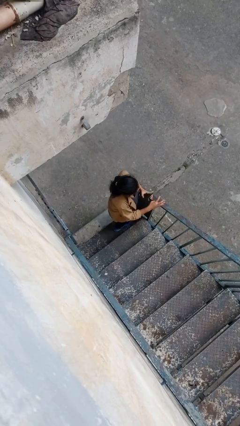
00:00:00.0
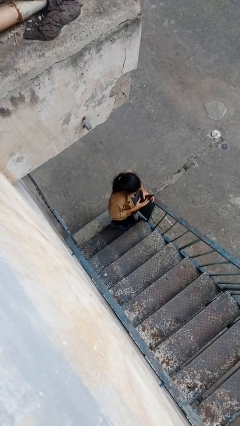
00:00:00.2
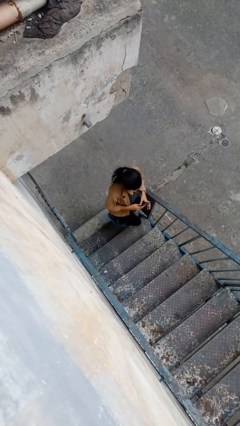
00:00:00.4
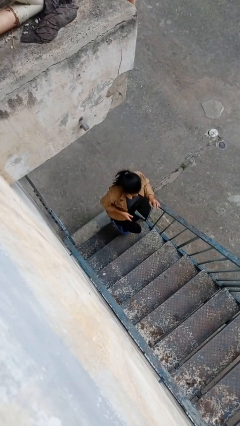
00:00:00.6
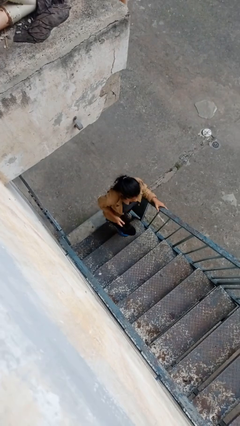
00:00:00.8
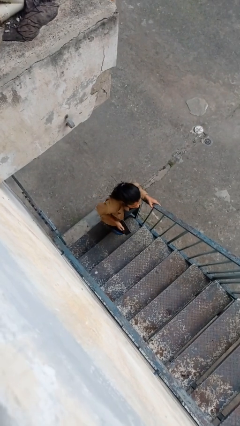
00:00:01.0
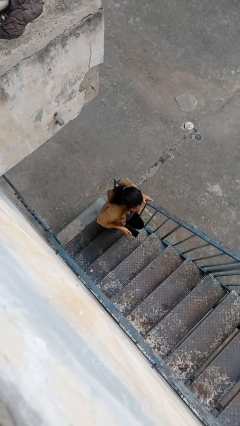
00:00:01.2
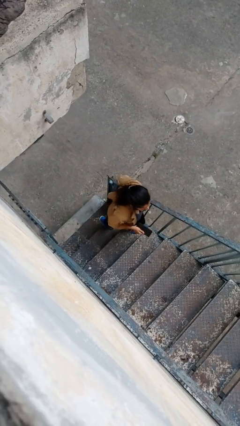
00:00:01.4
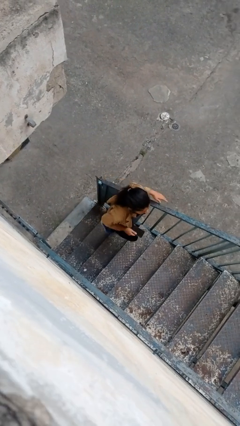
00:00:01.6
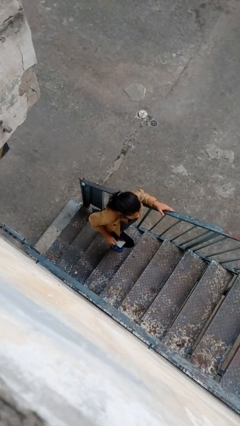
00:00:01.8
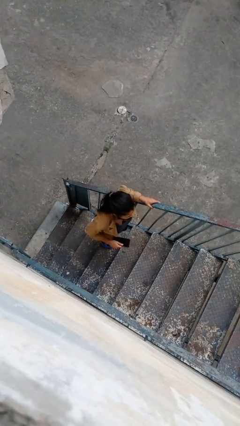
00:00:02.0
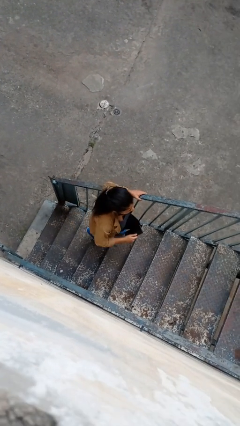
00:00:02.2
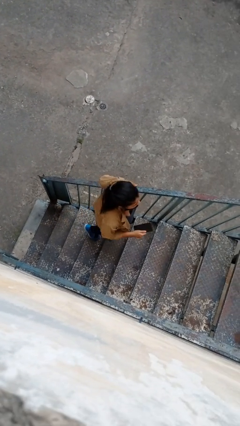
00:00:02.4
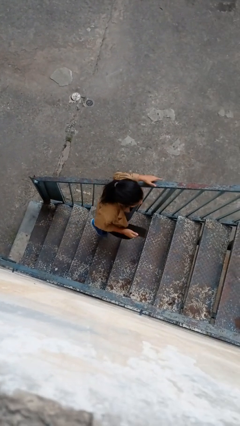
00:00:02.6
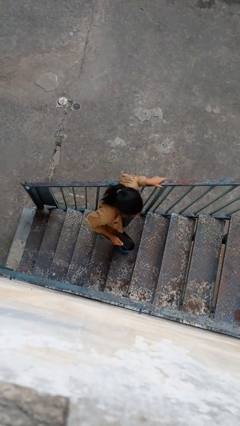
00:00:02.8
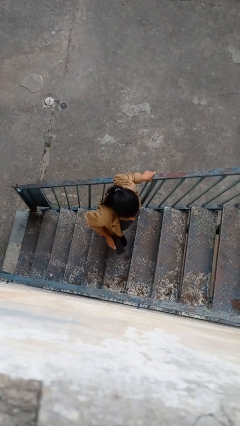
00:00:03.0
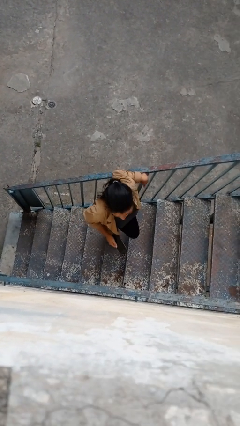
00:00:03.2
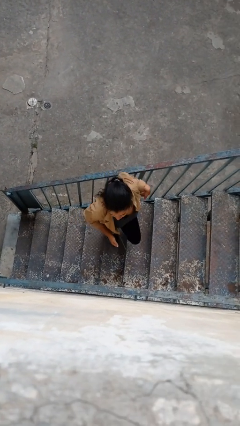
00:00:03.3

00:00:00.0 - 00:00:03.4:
person climbs up stairs

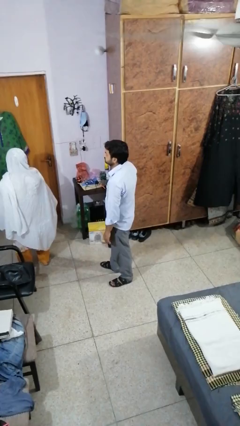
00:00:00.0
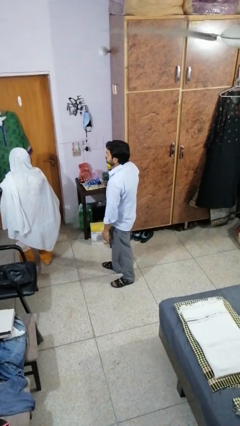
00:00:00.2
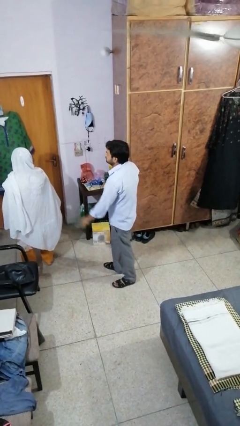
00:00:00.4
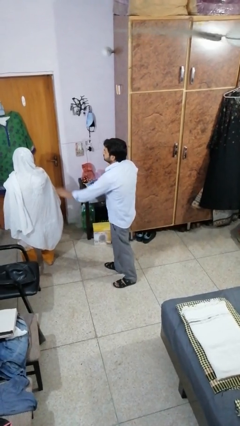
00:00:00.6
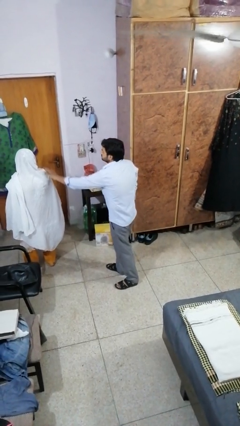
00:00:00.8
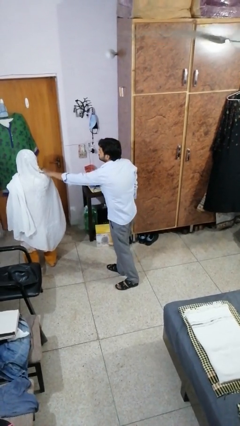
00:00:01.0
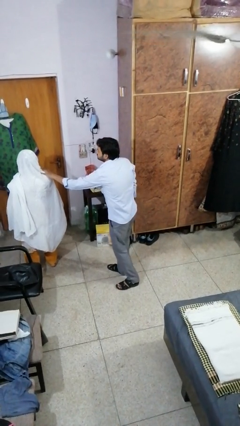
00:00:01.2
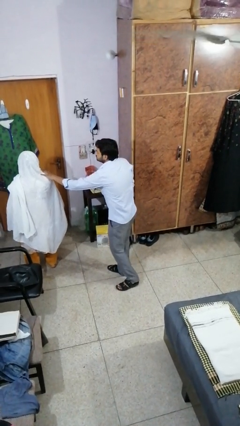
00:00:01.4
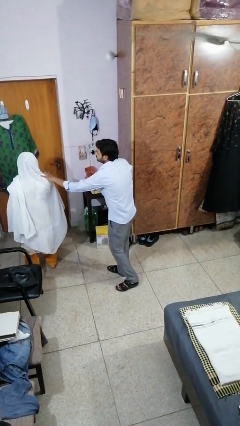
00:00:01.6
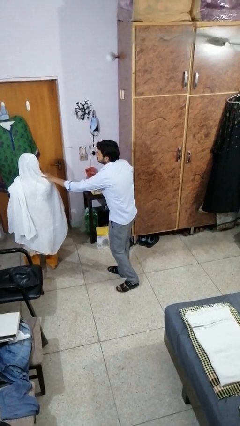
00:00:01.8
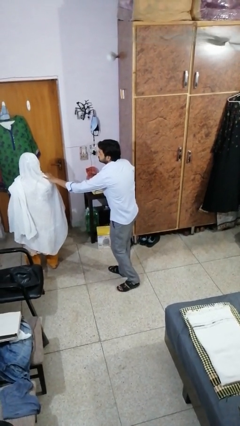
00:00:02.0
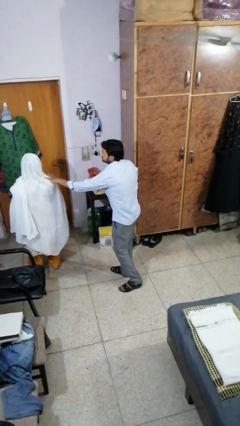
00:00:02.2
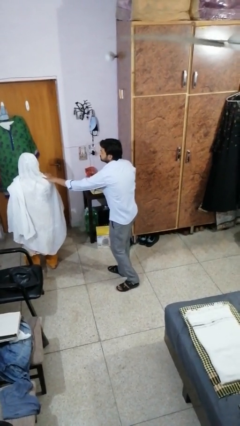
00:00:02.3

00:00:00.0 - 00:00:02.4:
person touches back of person

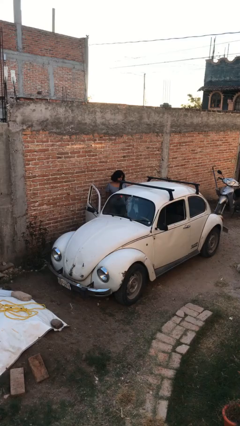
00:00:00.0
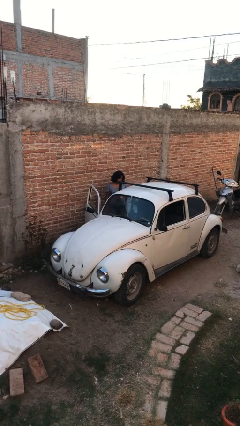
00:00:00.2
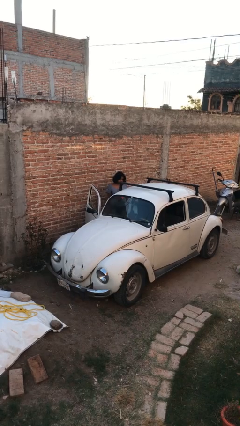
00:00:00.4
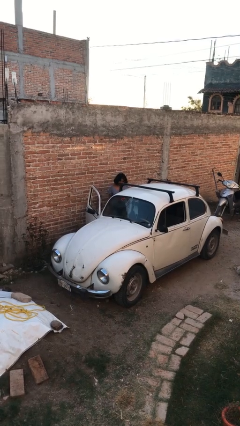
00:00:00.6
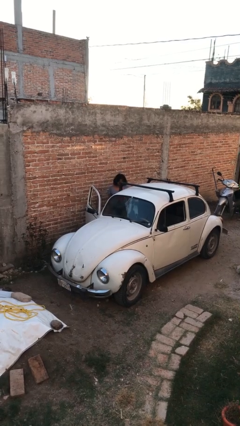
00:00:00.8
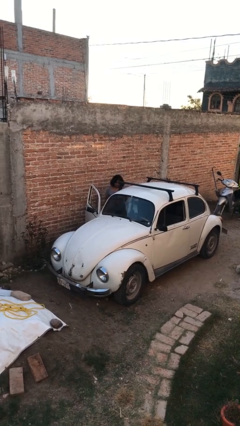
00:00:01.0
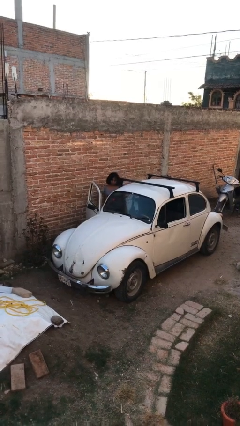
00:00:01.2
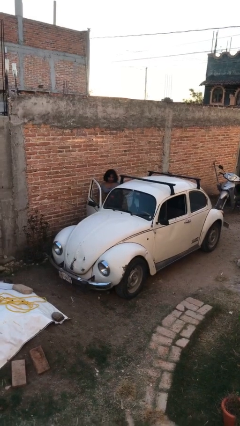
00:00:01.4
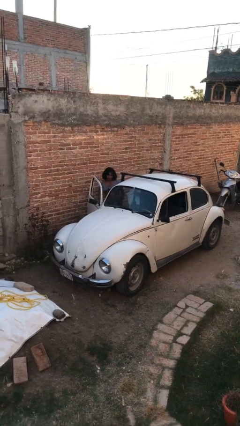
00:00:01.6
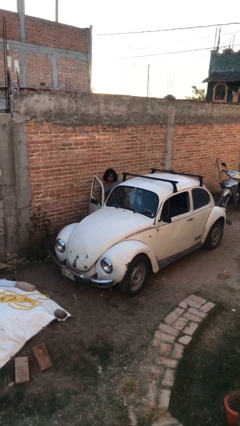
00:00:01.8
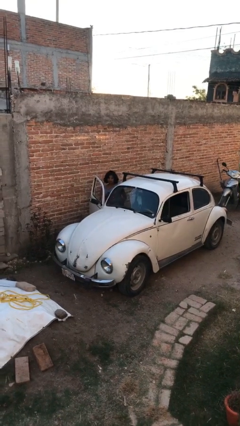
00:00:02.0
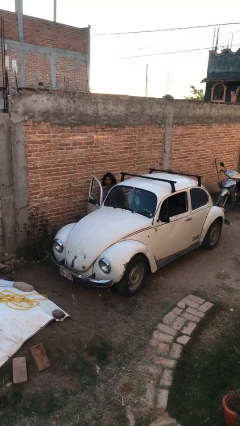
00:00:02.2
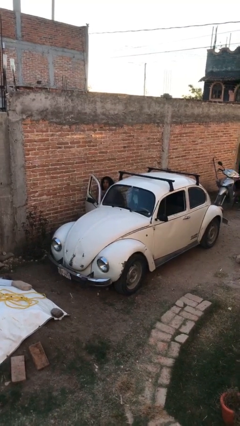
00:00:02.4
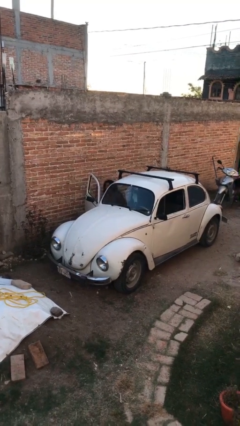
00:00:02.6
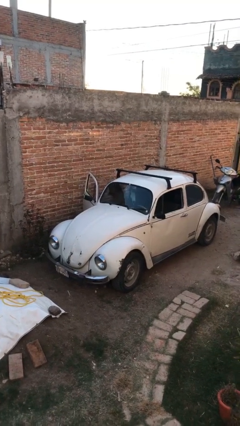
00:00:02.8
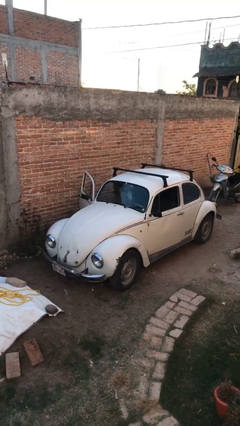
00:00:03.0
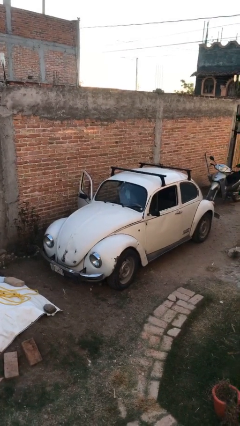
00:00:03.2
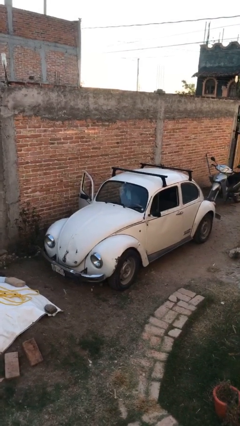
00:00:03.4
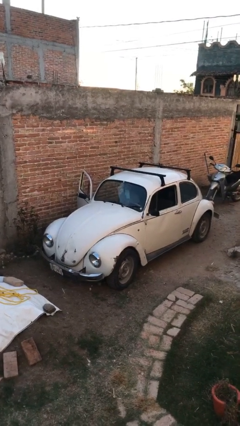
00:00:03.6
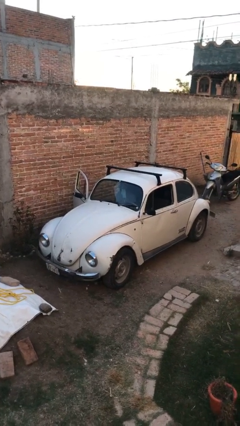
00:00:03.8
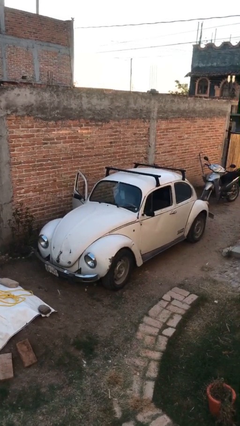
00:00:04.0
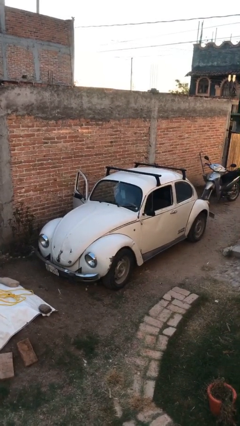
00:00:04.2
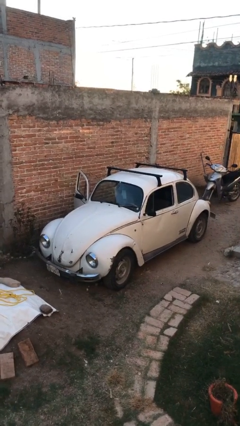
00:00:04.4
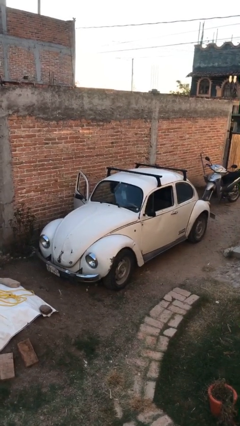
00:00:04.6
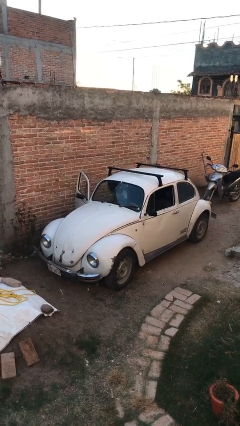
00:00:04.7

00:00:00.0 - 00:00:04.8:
person enters car

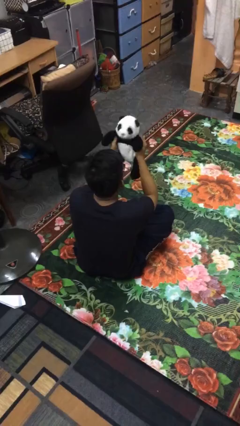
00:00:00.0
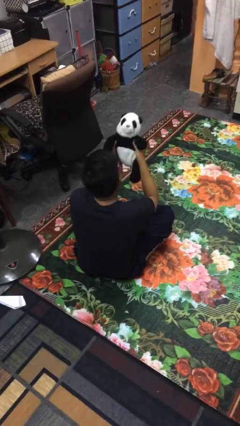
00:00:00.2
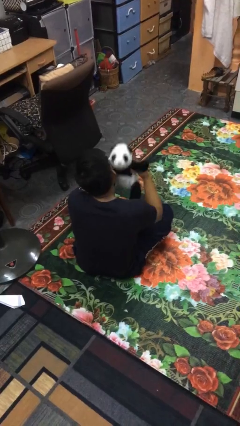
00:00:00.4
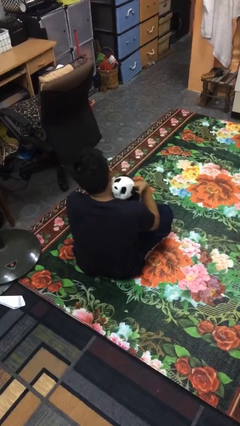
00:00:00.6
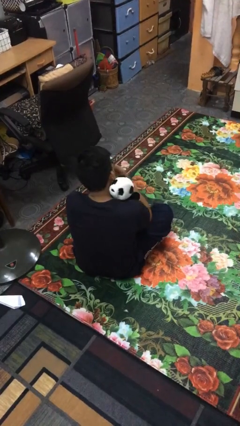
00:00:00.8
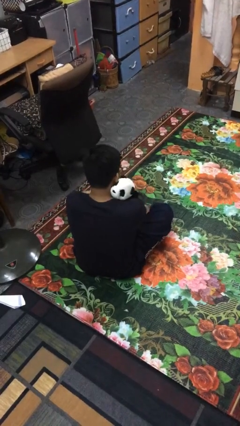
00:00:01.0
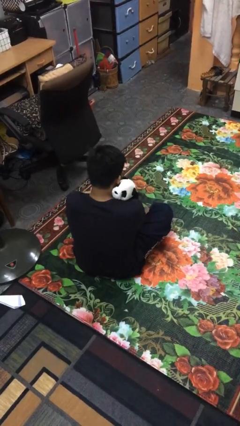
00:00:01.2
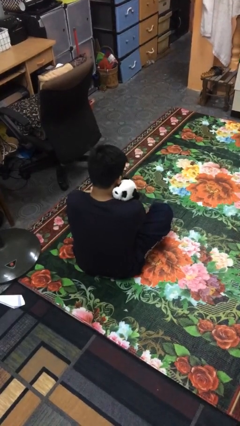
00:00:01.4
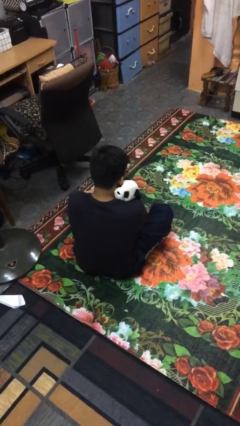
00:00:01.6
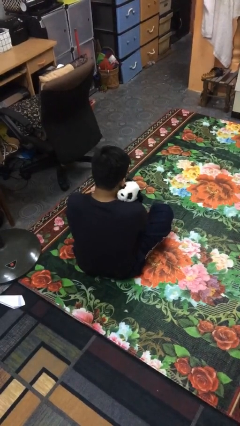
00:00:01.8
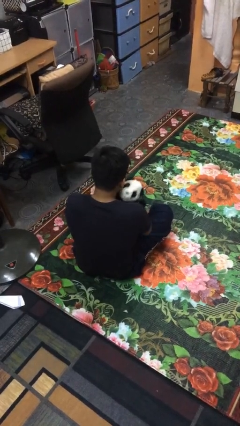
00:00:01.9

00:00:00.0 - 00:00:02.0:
person hugs stuffed animal

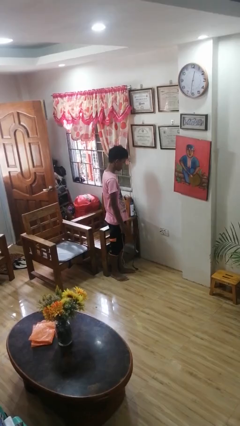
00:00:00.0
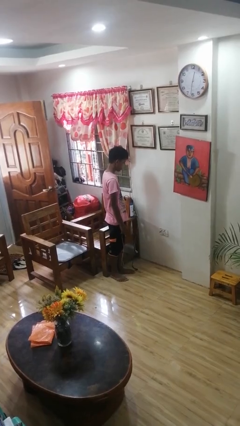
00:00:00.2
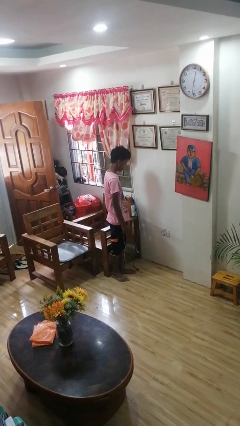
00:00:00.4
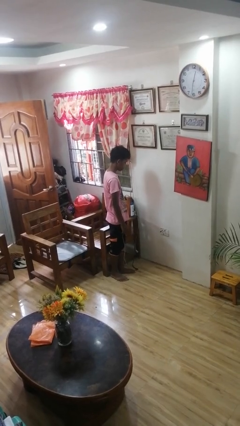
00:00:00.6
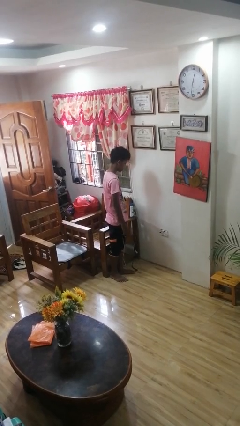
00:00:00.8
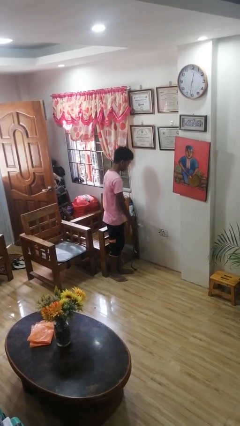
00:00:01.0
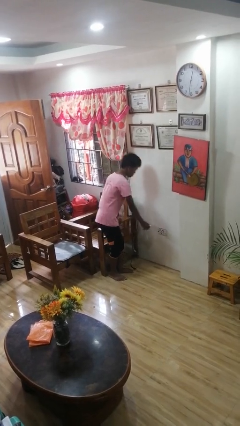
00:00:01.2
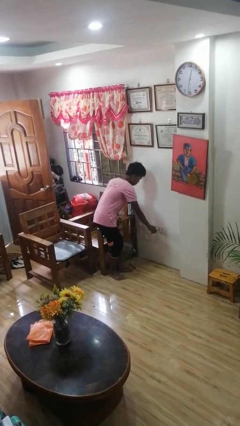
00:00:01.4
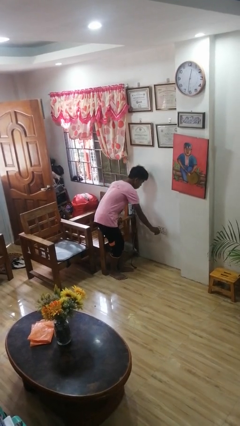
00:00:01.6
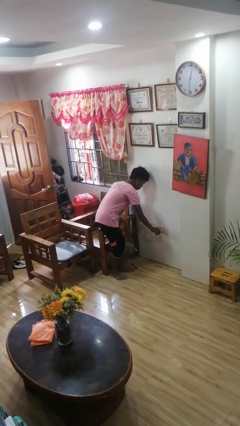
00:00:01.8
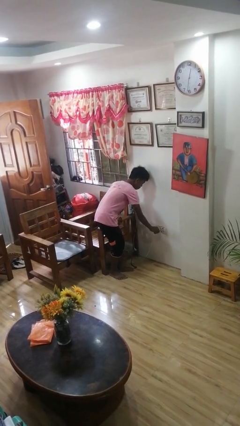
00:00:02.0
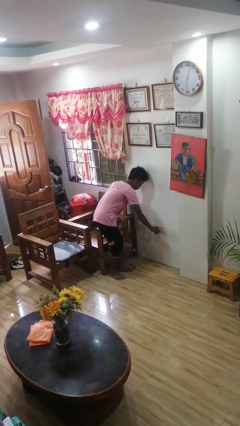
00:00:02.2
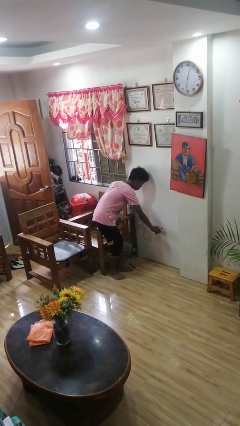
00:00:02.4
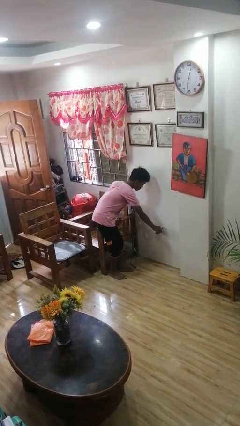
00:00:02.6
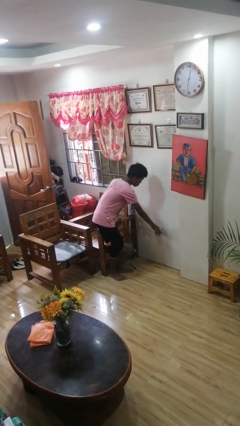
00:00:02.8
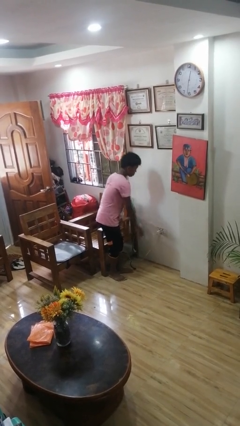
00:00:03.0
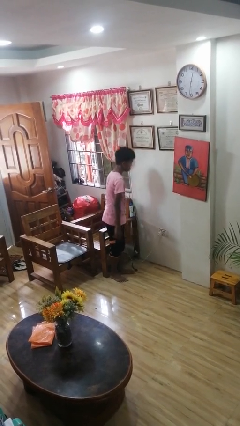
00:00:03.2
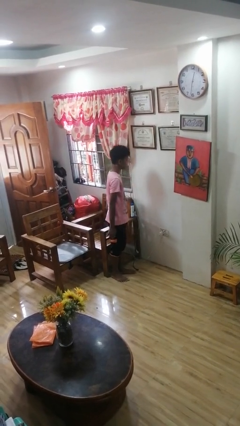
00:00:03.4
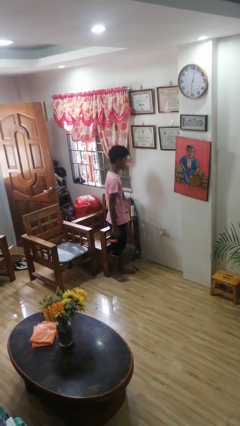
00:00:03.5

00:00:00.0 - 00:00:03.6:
person plugs into electrical socket

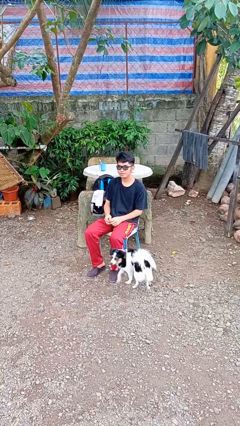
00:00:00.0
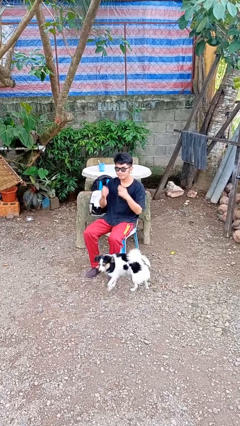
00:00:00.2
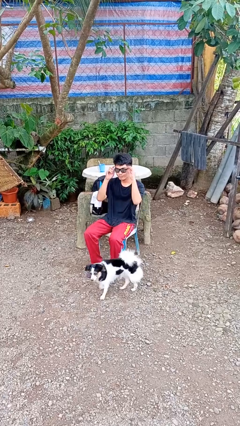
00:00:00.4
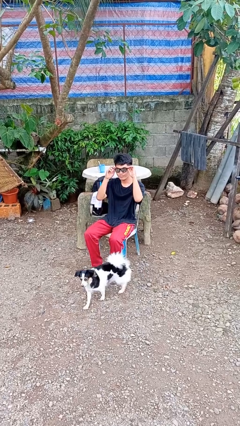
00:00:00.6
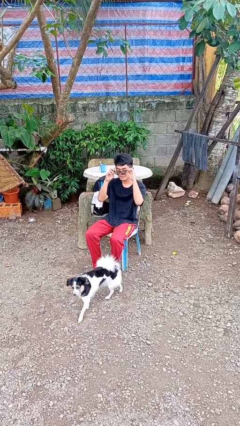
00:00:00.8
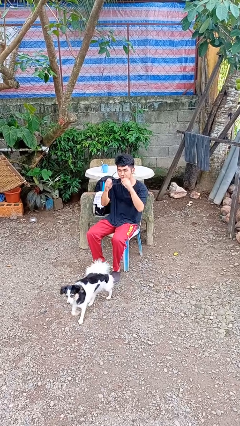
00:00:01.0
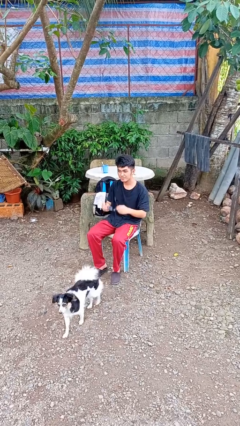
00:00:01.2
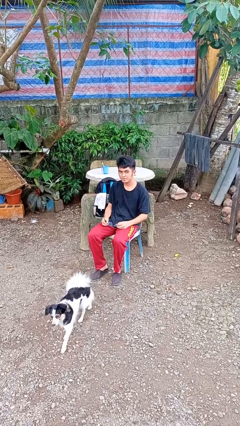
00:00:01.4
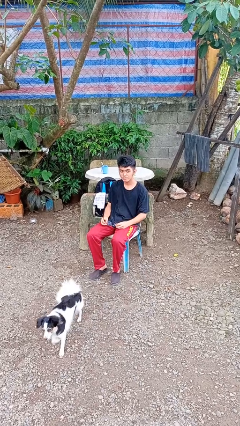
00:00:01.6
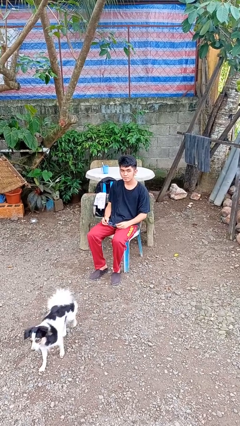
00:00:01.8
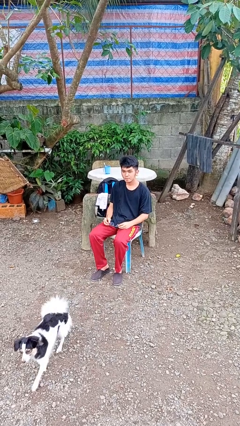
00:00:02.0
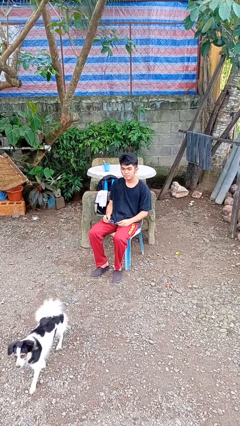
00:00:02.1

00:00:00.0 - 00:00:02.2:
person takes off sunglasses
